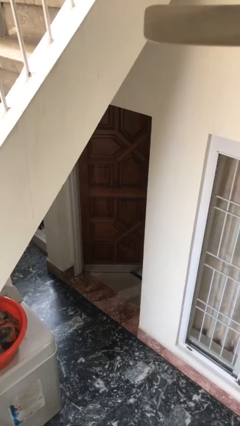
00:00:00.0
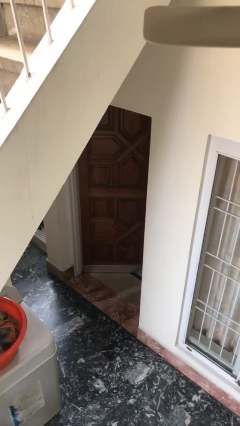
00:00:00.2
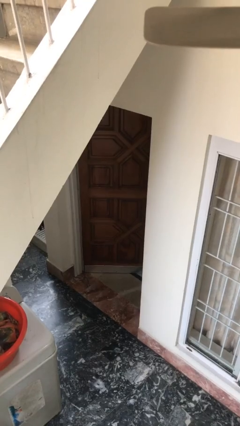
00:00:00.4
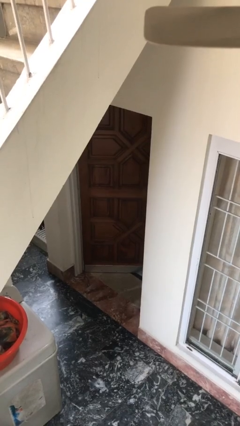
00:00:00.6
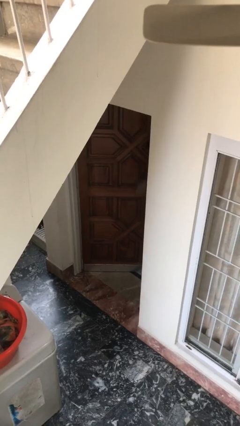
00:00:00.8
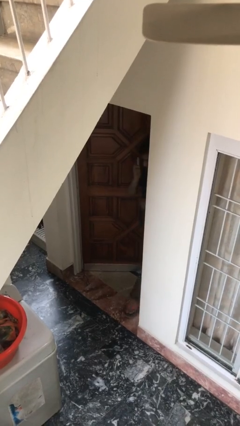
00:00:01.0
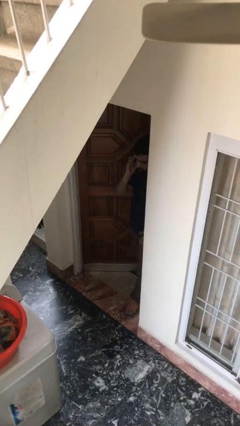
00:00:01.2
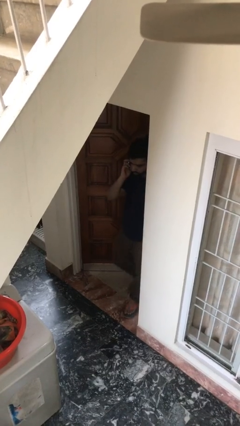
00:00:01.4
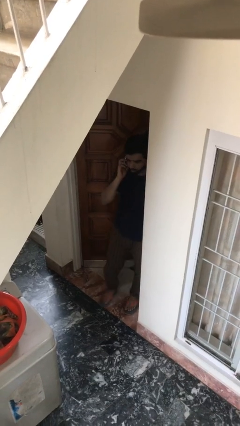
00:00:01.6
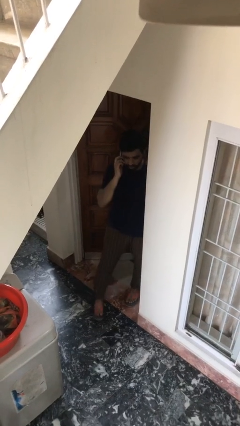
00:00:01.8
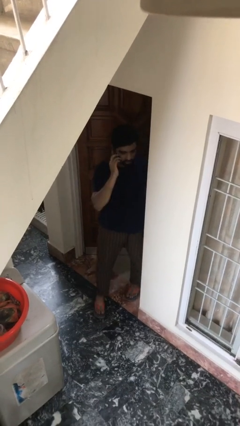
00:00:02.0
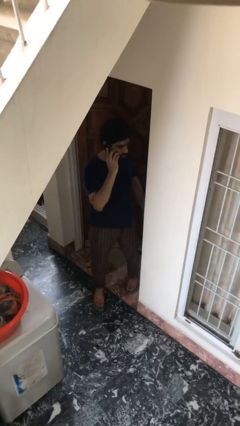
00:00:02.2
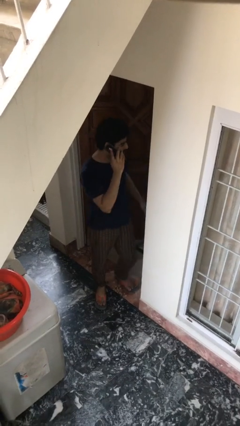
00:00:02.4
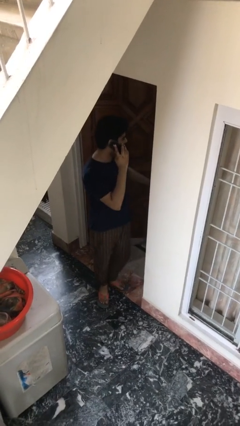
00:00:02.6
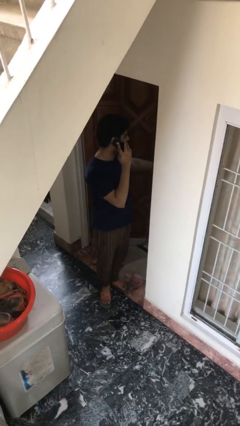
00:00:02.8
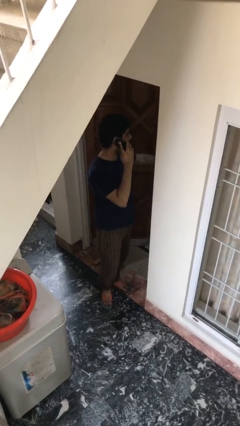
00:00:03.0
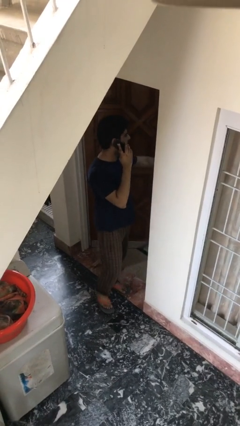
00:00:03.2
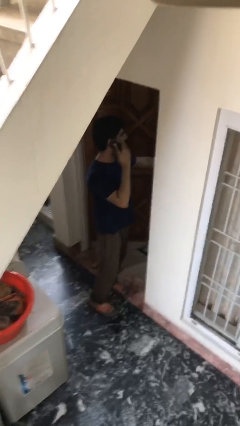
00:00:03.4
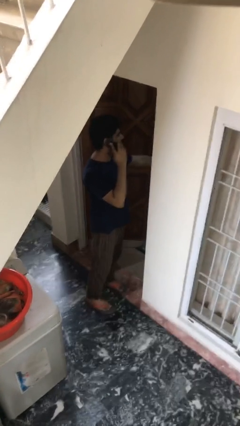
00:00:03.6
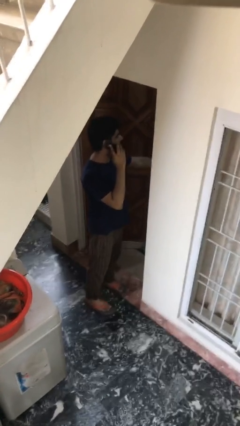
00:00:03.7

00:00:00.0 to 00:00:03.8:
person enters scene through structure

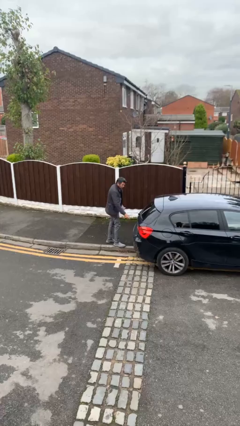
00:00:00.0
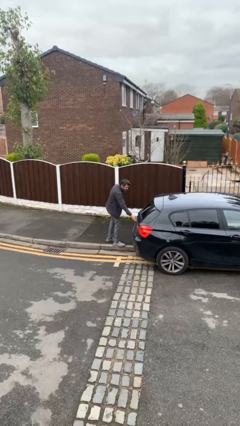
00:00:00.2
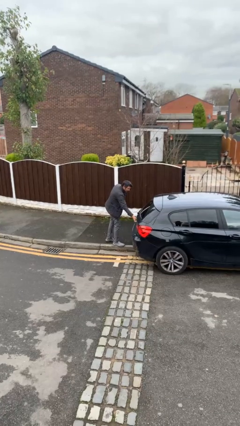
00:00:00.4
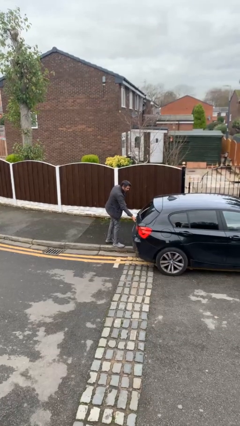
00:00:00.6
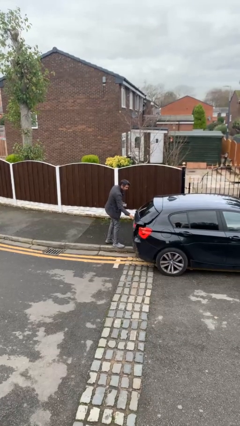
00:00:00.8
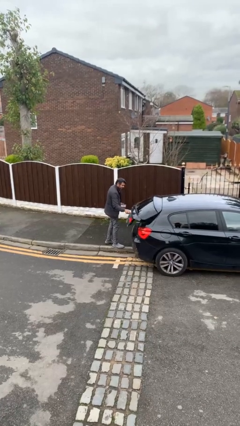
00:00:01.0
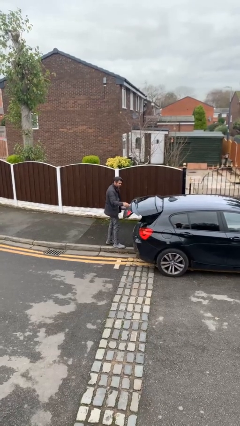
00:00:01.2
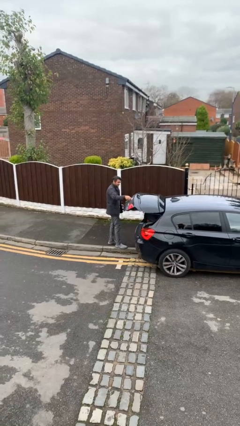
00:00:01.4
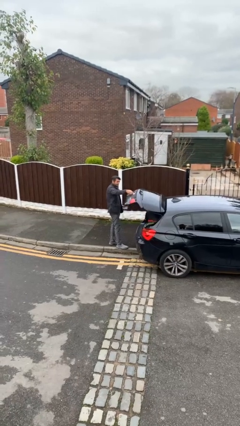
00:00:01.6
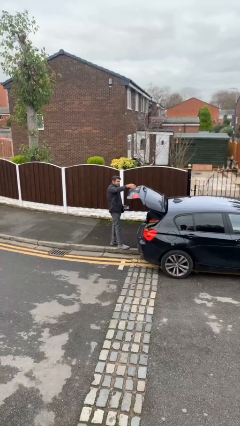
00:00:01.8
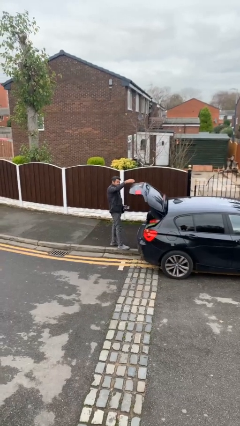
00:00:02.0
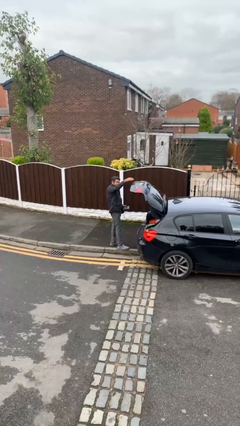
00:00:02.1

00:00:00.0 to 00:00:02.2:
person opens car trunk

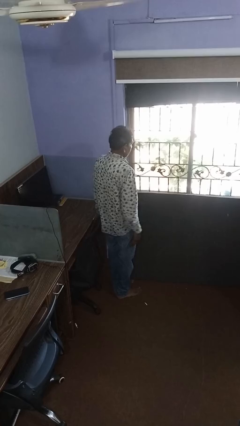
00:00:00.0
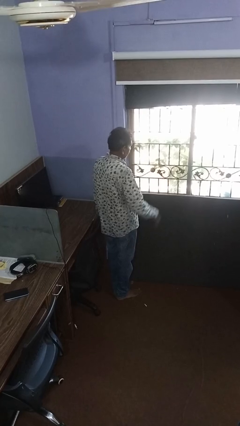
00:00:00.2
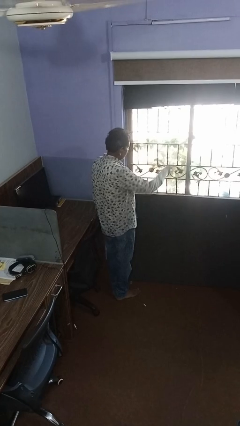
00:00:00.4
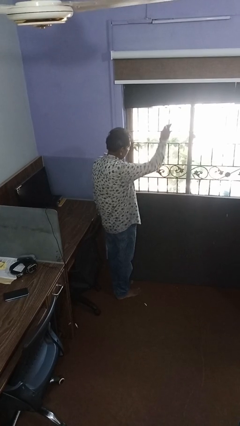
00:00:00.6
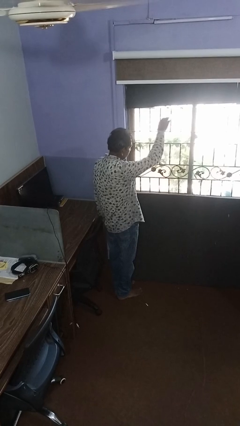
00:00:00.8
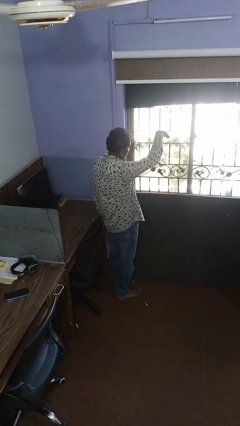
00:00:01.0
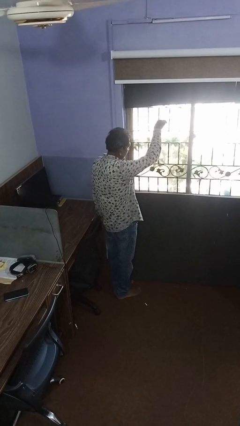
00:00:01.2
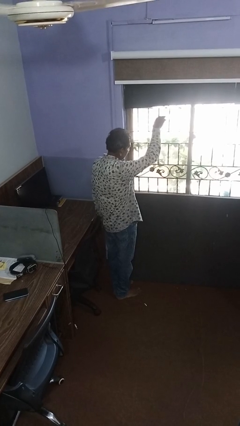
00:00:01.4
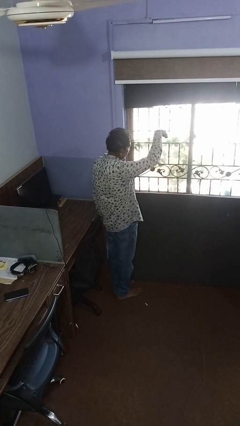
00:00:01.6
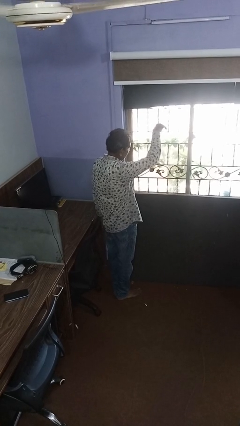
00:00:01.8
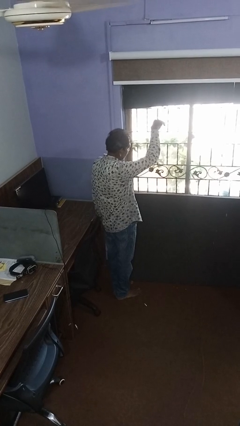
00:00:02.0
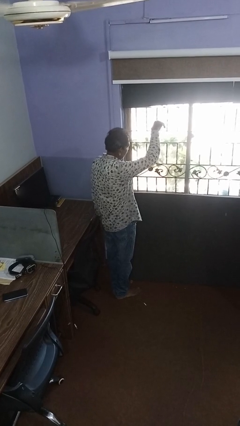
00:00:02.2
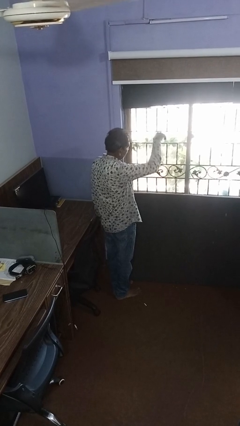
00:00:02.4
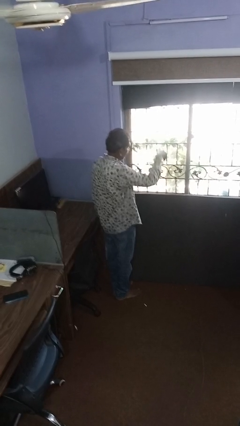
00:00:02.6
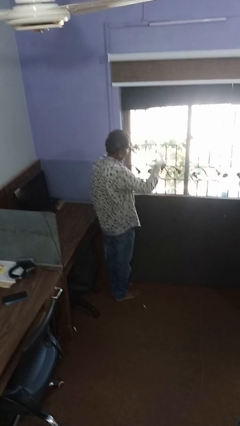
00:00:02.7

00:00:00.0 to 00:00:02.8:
person gestures come here

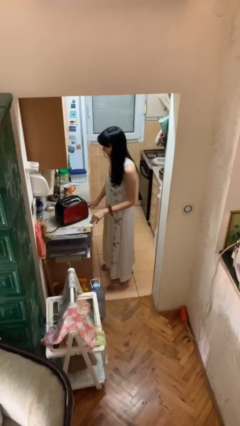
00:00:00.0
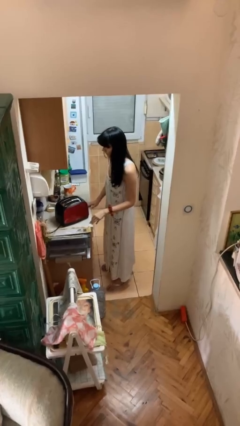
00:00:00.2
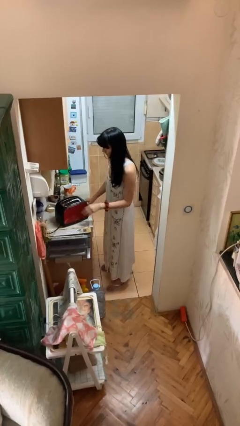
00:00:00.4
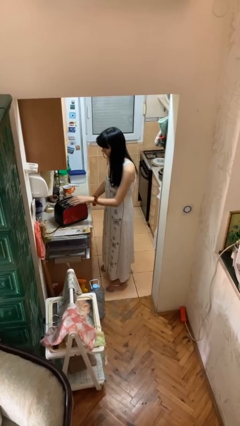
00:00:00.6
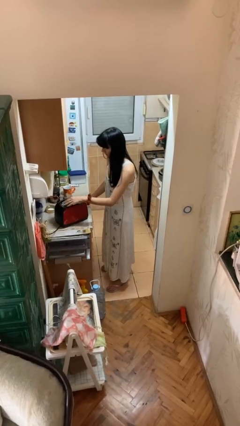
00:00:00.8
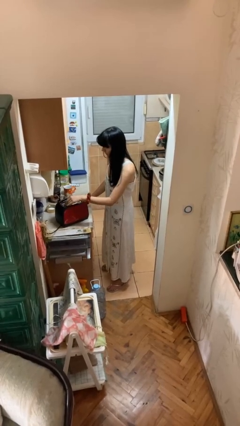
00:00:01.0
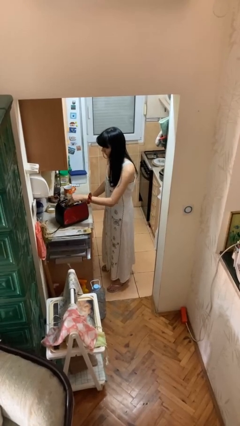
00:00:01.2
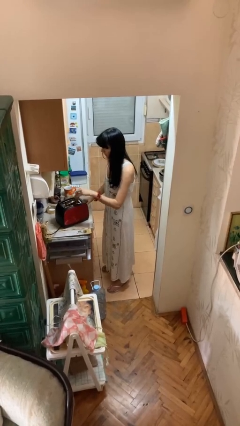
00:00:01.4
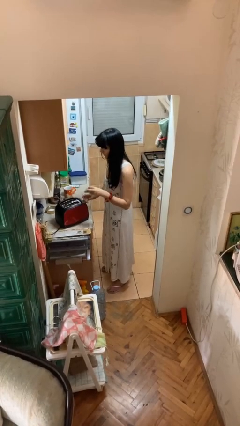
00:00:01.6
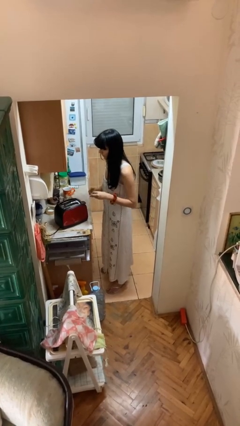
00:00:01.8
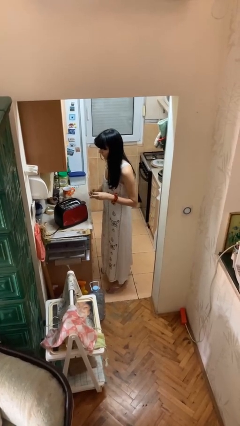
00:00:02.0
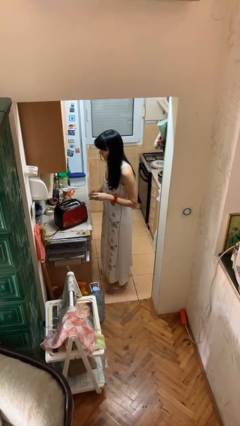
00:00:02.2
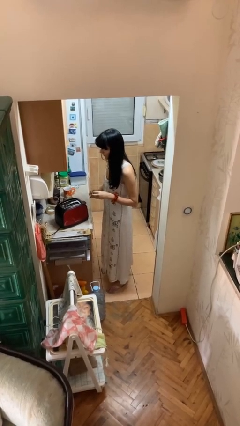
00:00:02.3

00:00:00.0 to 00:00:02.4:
person takes object from toaster

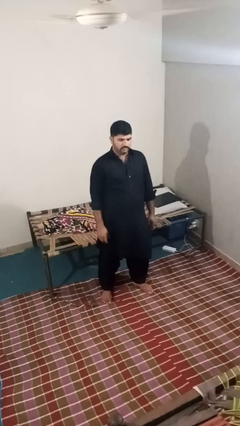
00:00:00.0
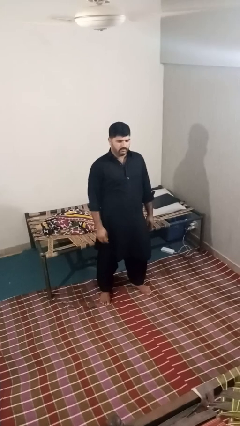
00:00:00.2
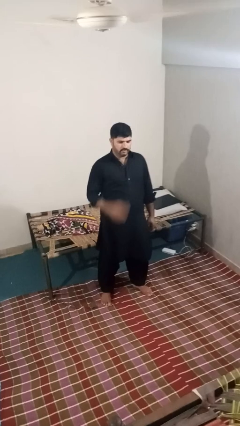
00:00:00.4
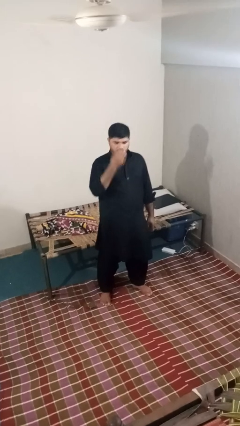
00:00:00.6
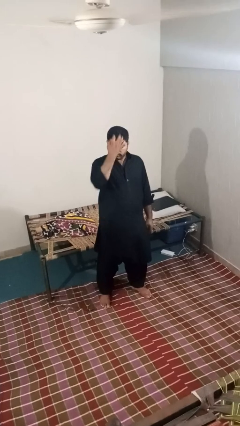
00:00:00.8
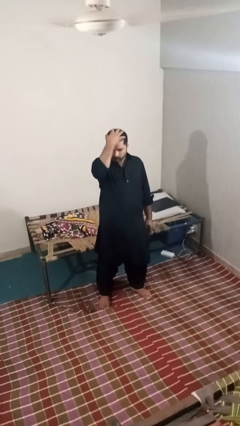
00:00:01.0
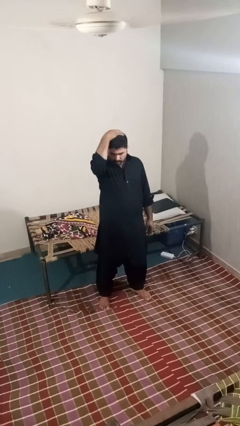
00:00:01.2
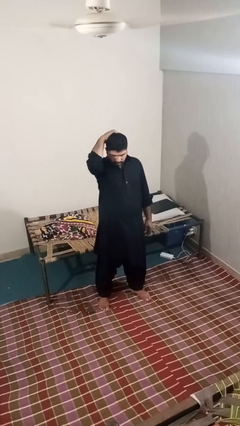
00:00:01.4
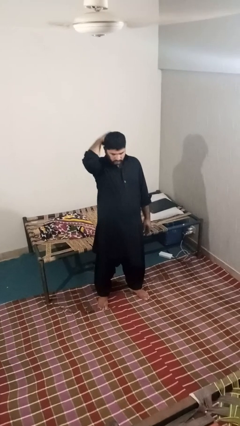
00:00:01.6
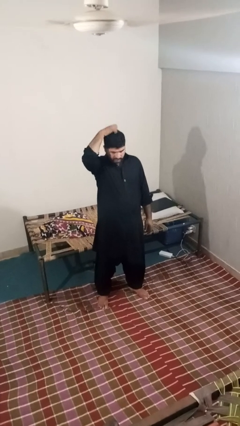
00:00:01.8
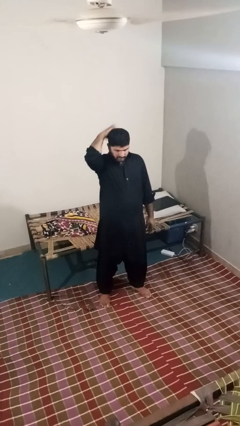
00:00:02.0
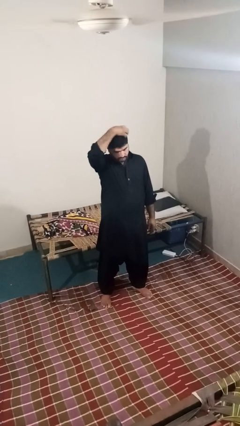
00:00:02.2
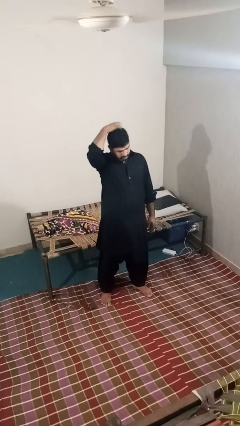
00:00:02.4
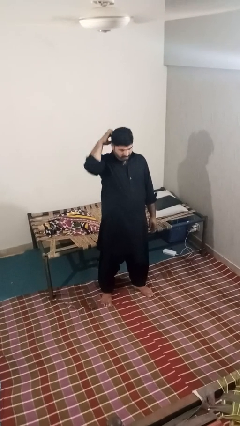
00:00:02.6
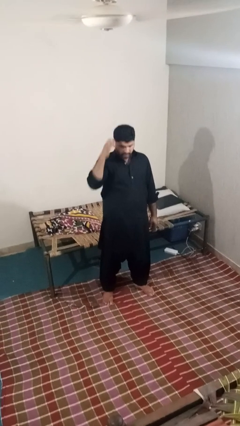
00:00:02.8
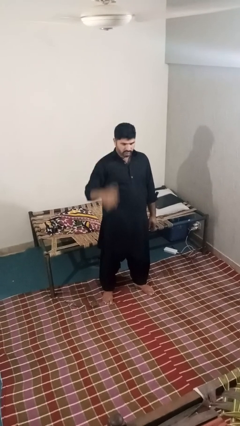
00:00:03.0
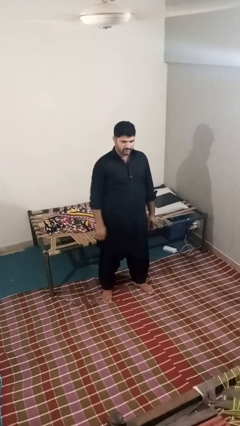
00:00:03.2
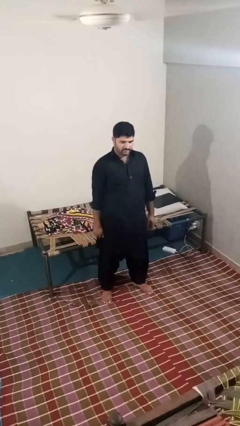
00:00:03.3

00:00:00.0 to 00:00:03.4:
person scratches face

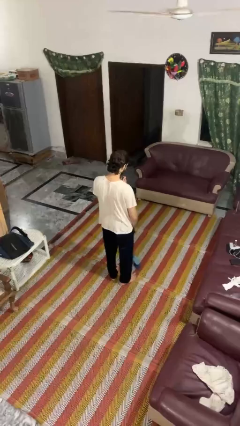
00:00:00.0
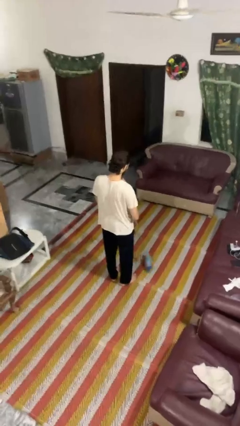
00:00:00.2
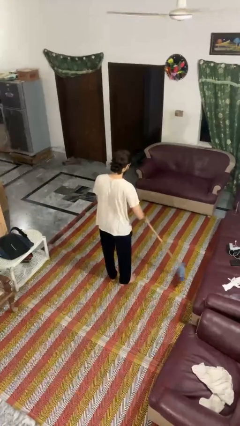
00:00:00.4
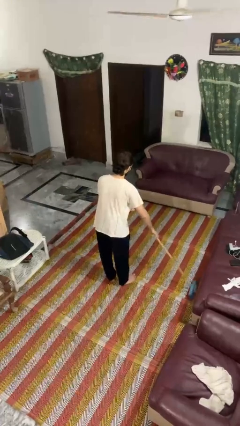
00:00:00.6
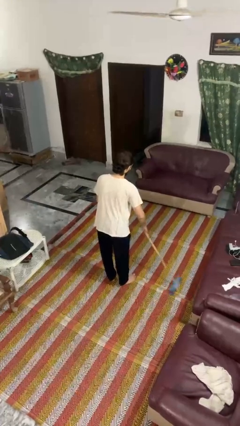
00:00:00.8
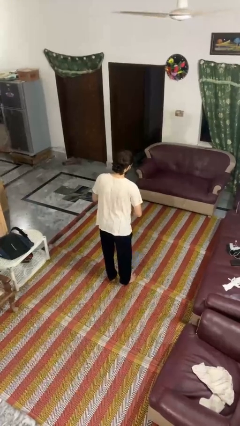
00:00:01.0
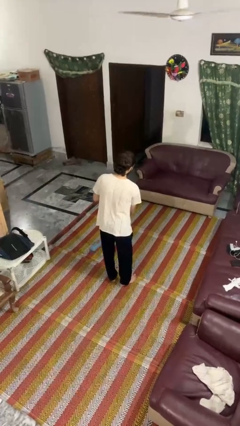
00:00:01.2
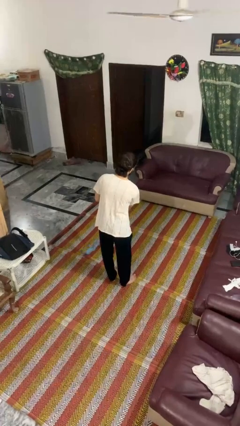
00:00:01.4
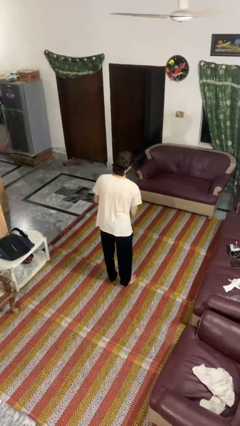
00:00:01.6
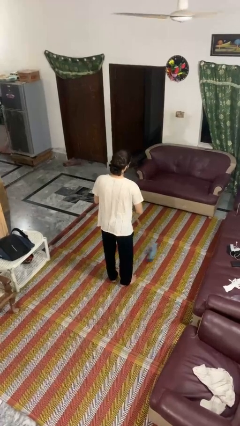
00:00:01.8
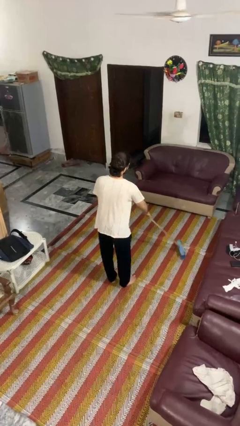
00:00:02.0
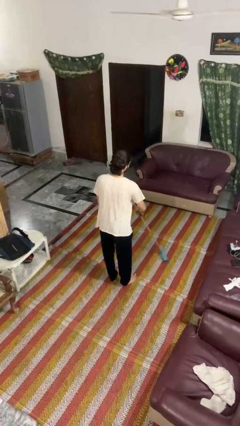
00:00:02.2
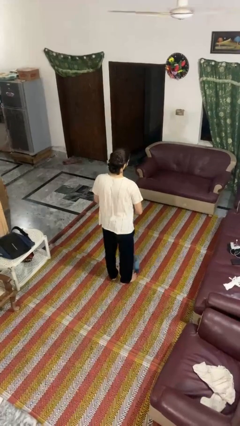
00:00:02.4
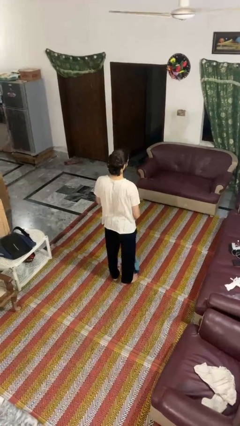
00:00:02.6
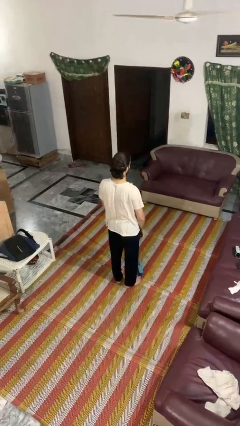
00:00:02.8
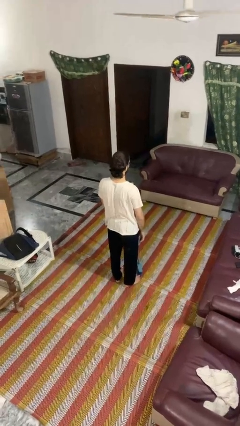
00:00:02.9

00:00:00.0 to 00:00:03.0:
person sweeps floor
